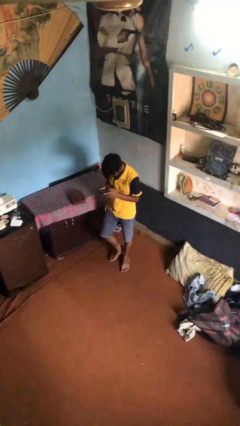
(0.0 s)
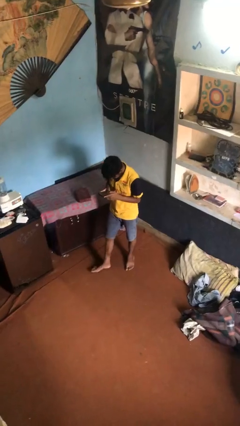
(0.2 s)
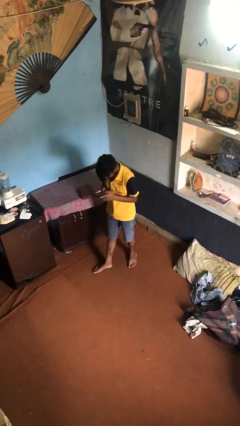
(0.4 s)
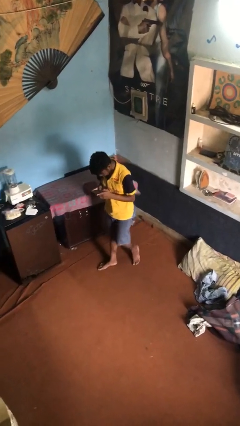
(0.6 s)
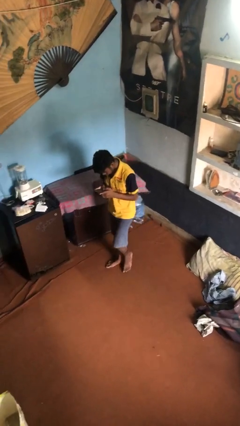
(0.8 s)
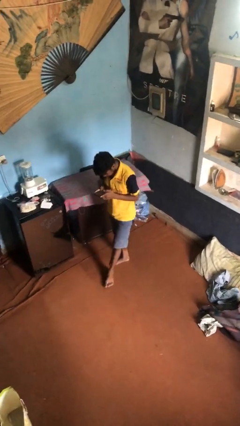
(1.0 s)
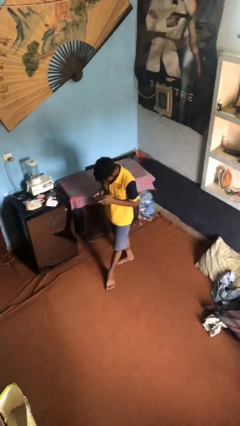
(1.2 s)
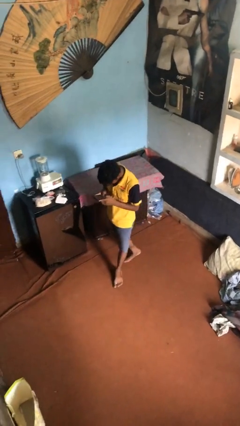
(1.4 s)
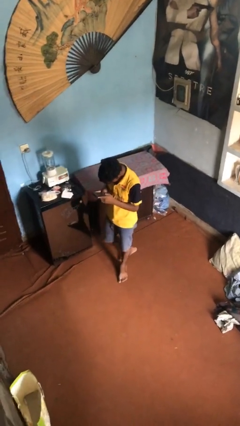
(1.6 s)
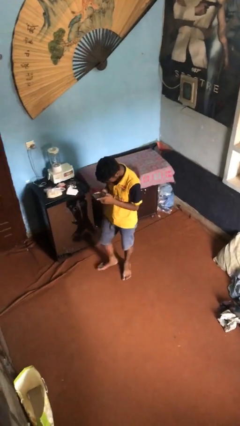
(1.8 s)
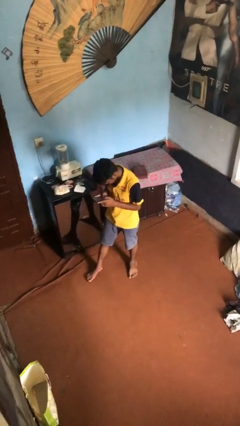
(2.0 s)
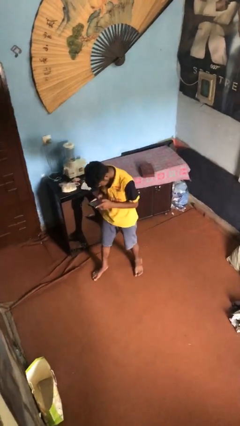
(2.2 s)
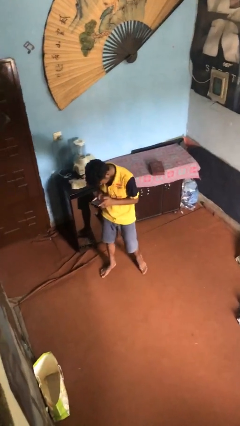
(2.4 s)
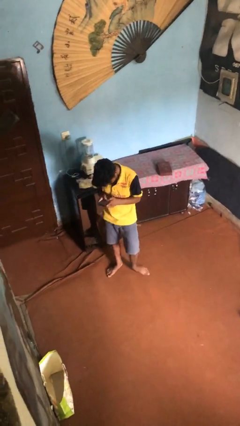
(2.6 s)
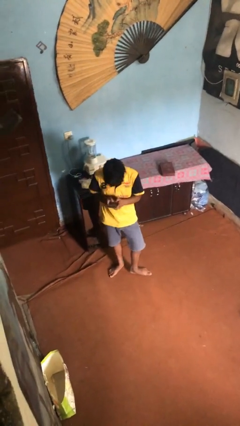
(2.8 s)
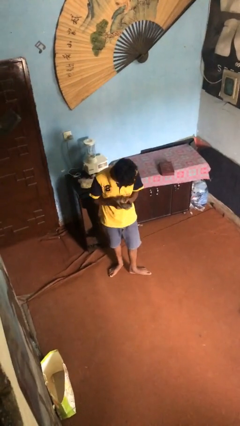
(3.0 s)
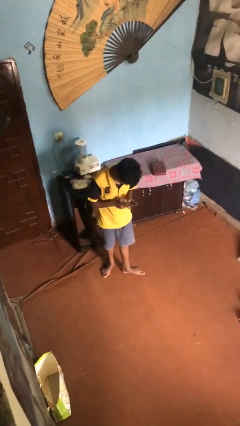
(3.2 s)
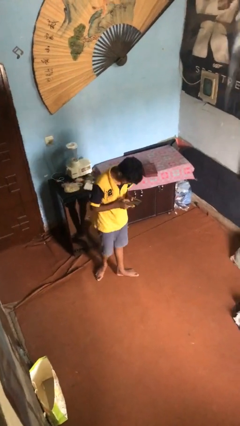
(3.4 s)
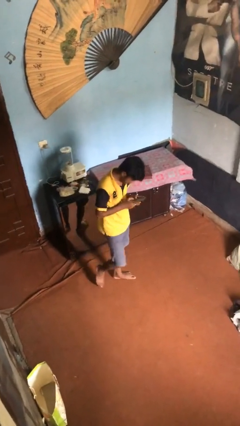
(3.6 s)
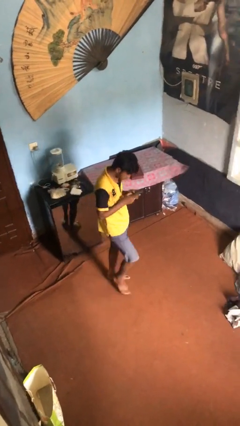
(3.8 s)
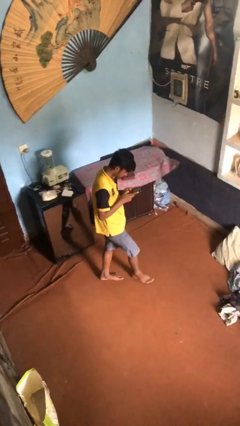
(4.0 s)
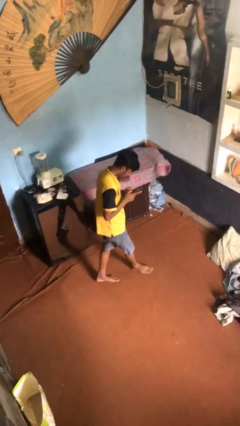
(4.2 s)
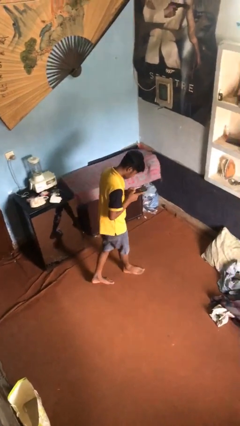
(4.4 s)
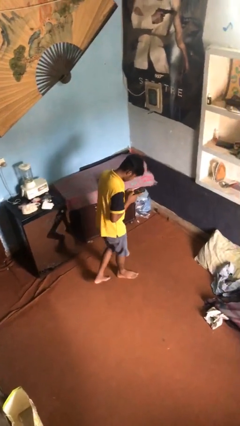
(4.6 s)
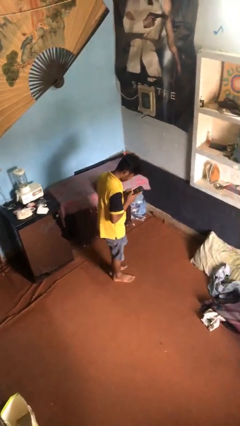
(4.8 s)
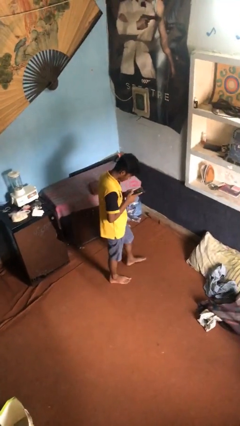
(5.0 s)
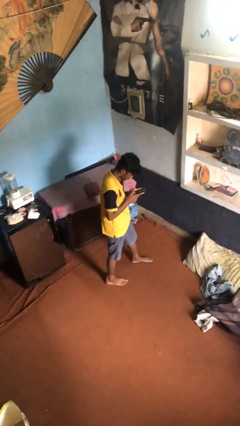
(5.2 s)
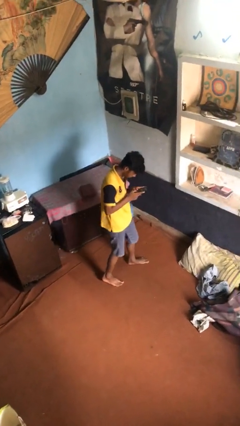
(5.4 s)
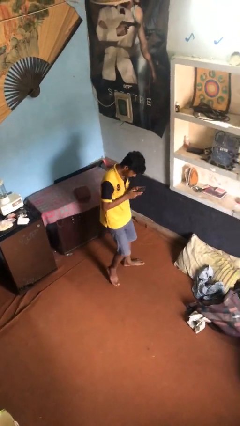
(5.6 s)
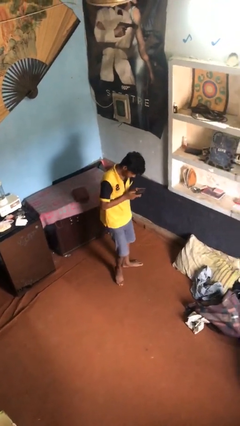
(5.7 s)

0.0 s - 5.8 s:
person texts on phone

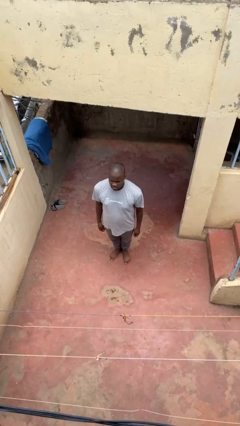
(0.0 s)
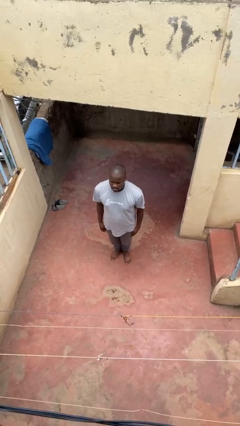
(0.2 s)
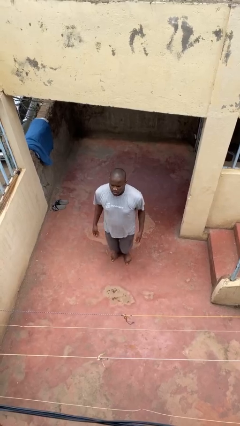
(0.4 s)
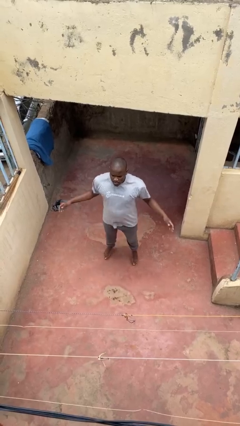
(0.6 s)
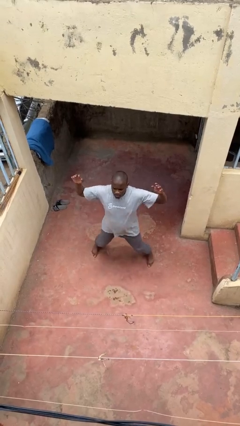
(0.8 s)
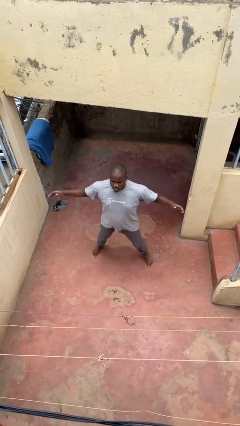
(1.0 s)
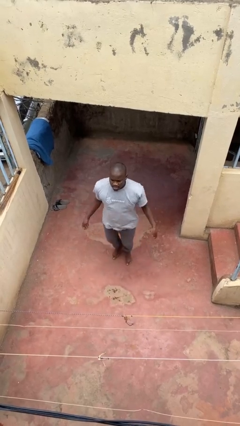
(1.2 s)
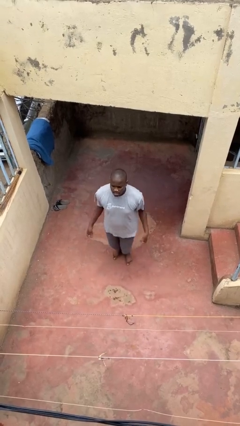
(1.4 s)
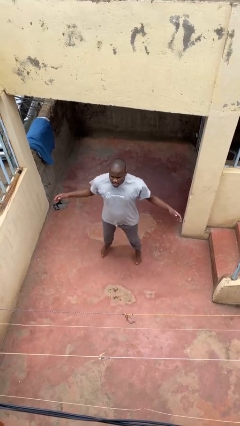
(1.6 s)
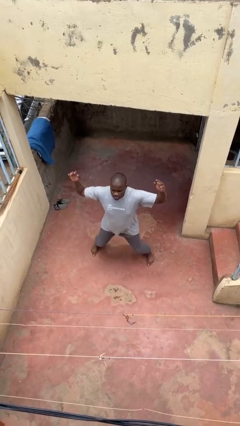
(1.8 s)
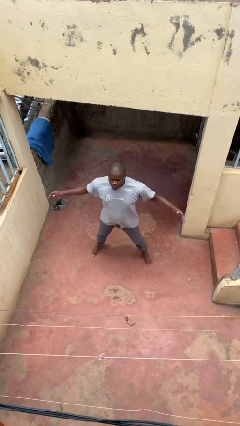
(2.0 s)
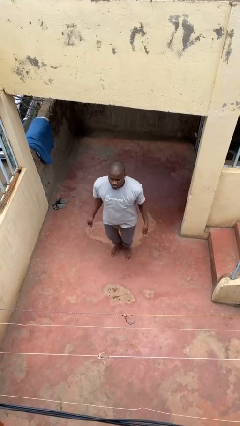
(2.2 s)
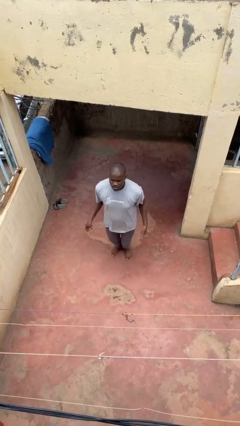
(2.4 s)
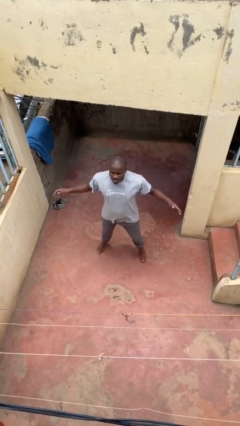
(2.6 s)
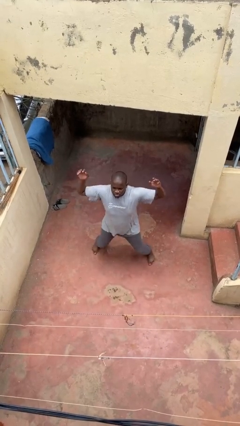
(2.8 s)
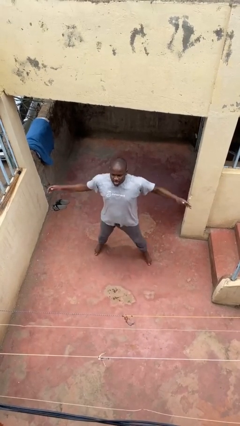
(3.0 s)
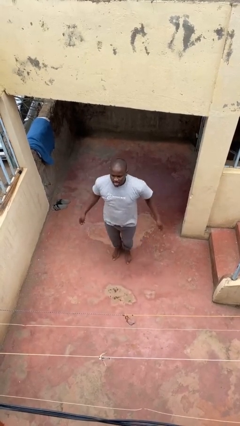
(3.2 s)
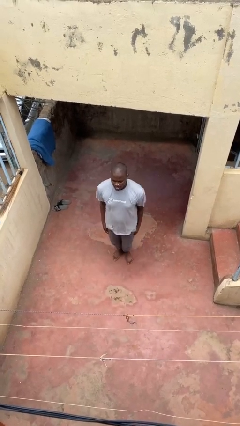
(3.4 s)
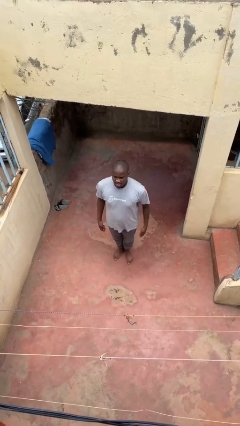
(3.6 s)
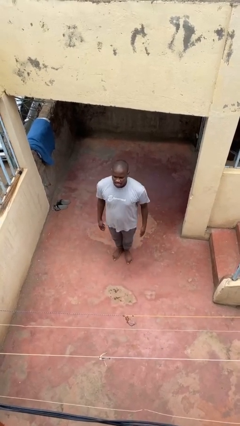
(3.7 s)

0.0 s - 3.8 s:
person exercises with jumping jacks

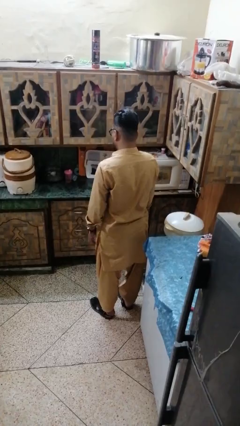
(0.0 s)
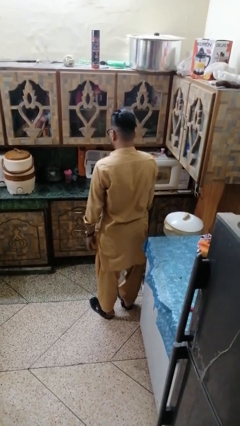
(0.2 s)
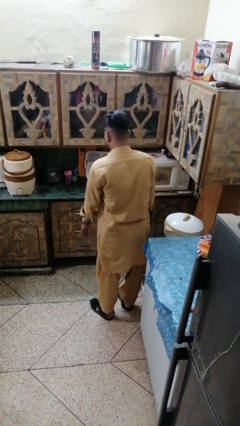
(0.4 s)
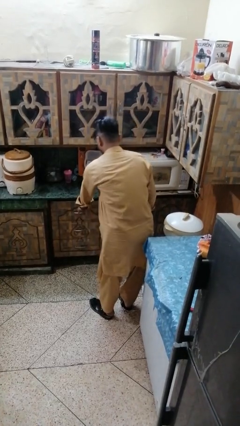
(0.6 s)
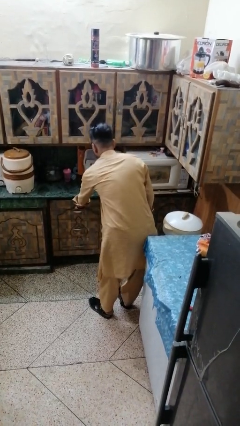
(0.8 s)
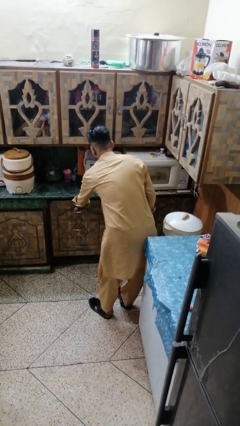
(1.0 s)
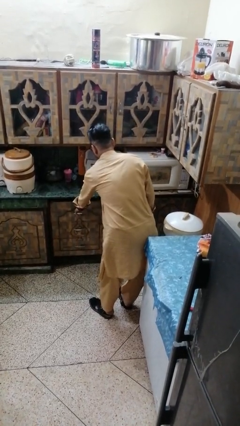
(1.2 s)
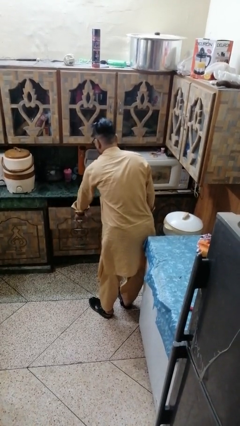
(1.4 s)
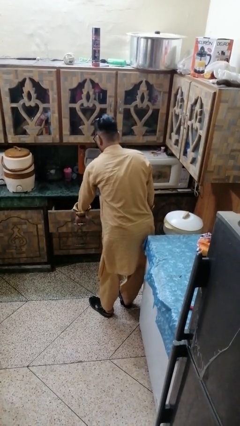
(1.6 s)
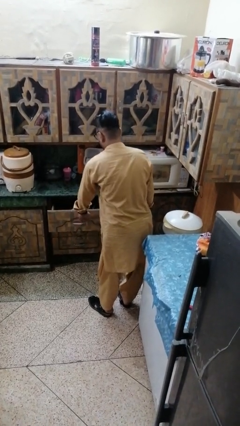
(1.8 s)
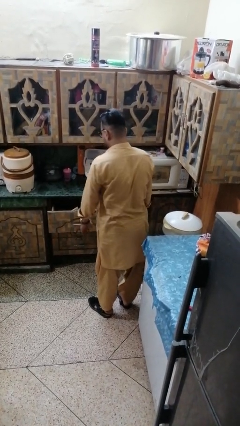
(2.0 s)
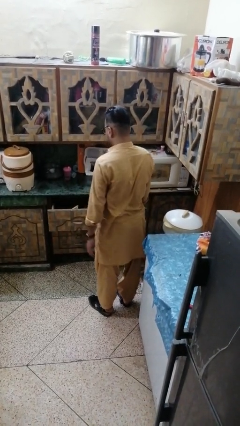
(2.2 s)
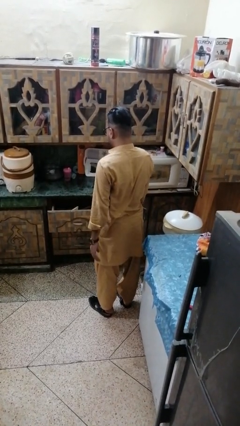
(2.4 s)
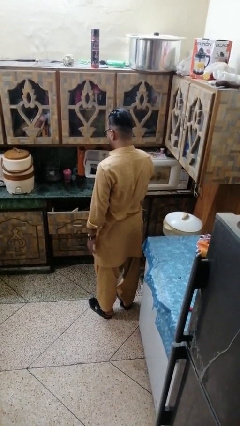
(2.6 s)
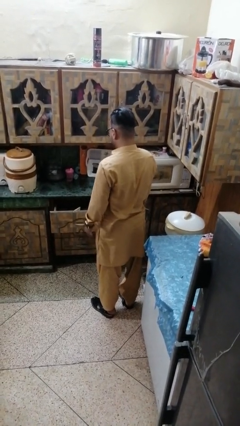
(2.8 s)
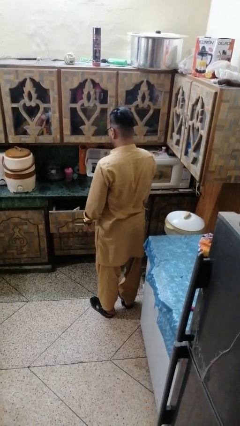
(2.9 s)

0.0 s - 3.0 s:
person opens kitchen drawer

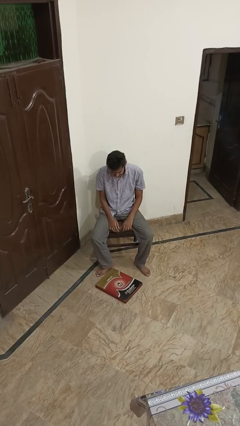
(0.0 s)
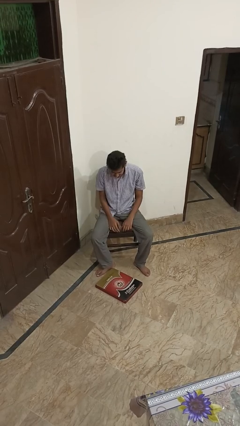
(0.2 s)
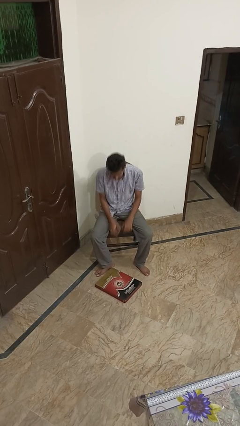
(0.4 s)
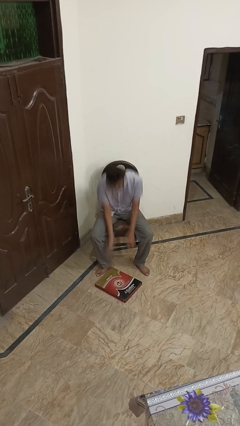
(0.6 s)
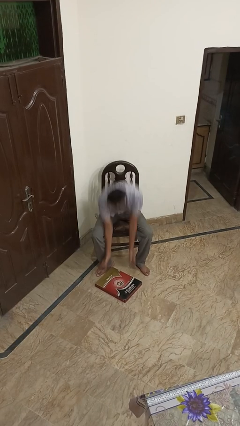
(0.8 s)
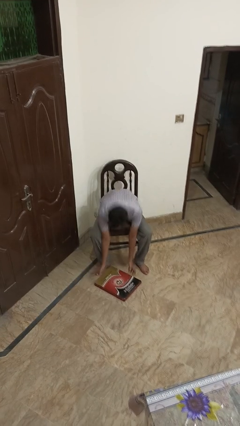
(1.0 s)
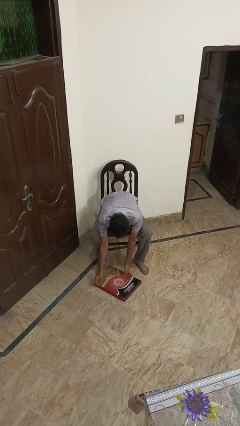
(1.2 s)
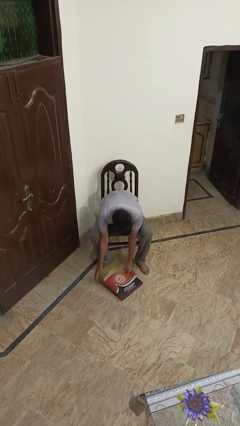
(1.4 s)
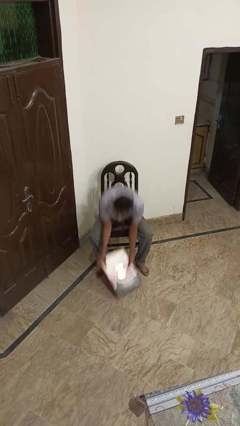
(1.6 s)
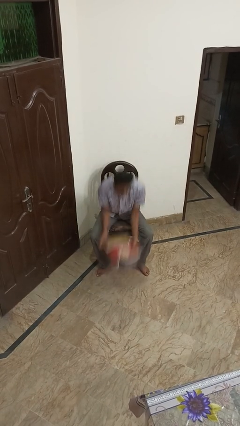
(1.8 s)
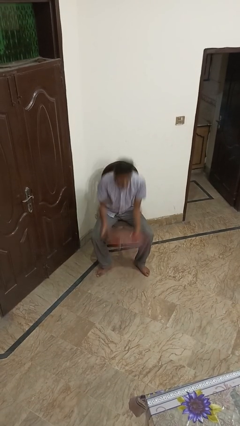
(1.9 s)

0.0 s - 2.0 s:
person picks up object from floor

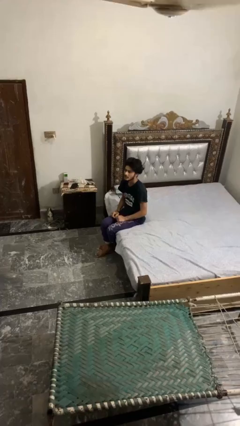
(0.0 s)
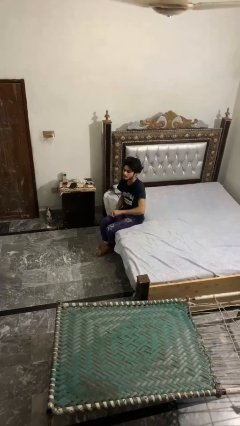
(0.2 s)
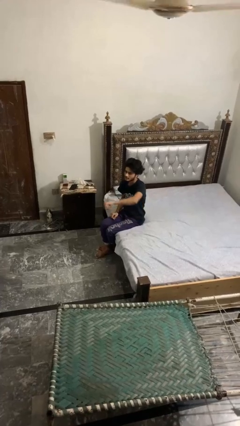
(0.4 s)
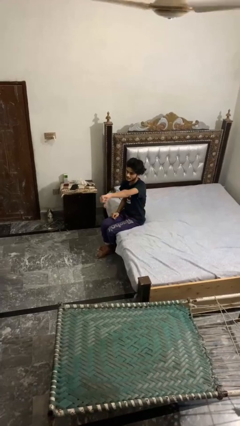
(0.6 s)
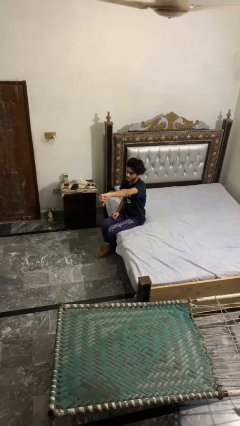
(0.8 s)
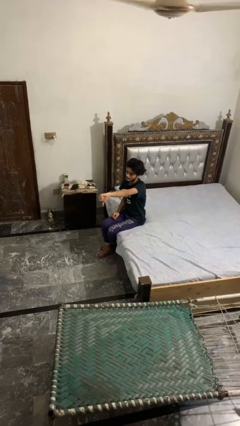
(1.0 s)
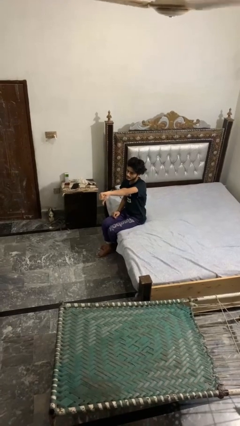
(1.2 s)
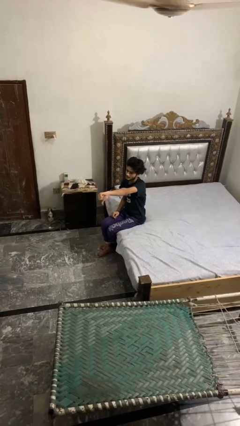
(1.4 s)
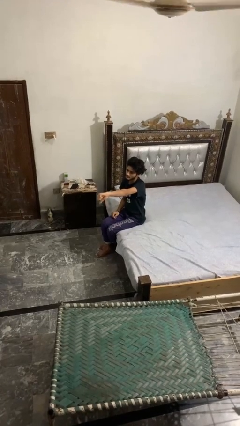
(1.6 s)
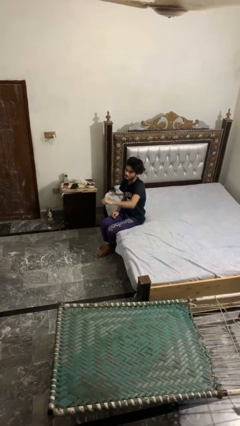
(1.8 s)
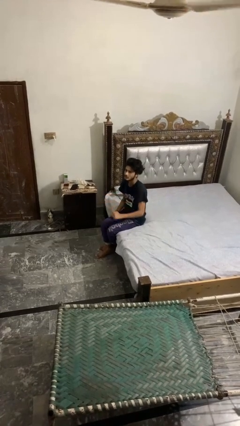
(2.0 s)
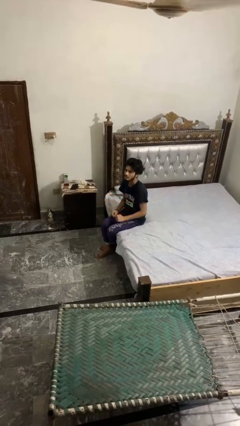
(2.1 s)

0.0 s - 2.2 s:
person gestures thumbs down

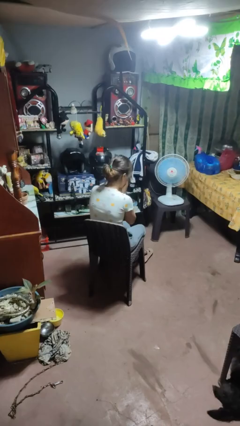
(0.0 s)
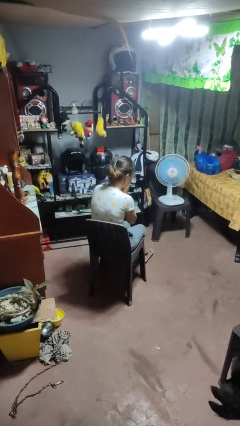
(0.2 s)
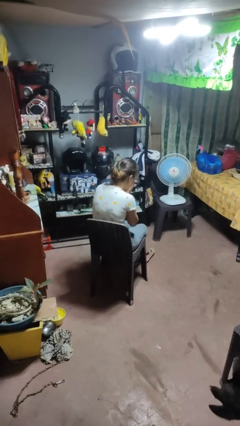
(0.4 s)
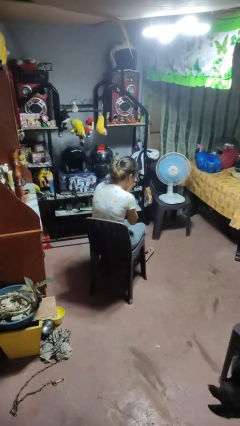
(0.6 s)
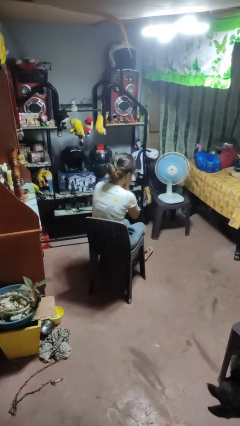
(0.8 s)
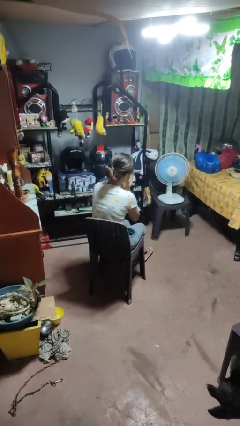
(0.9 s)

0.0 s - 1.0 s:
person sneezes into hand
